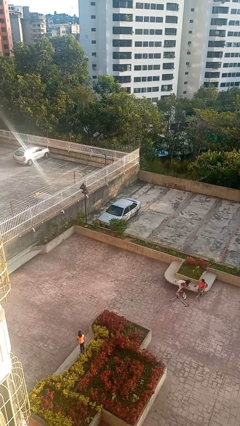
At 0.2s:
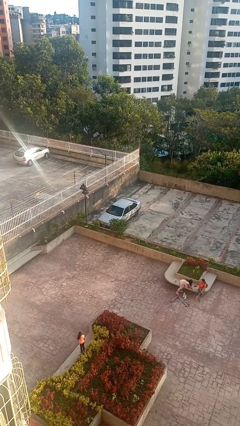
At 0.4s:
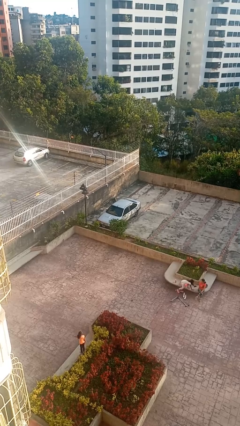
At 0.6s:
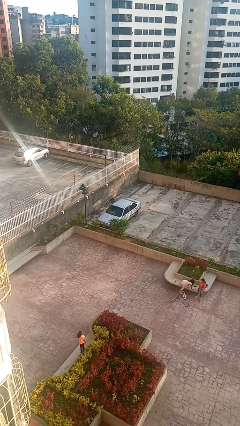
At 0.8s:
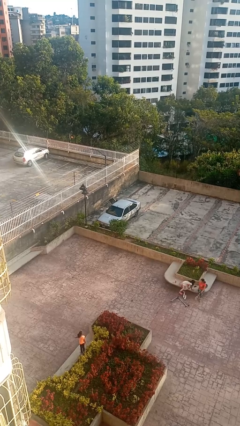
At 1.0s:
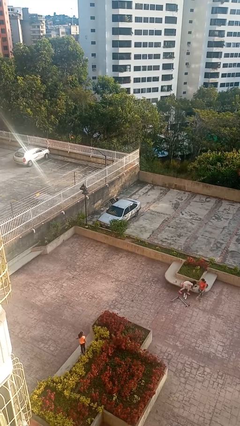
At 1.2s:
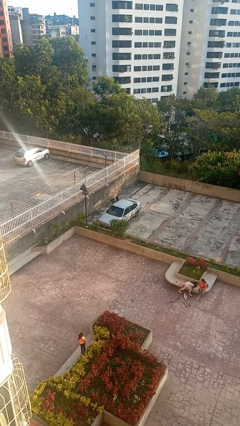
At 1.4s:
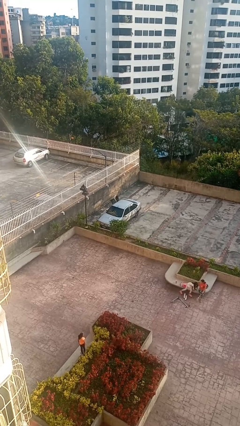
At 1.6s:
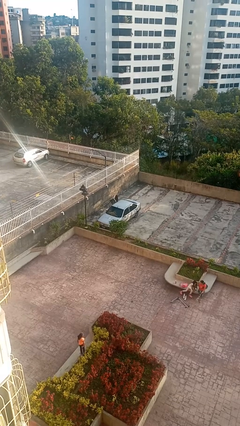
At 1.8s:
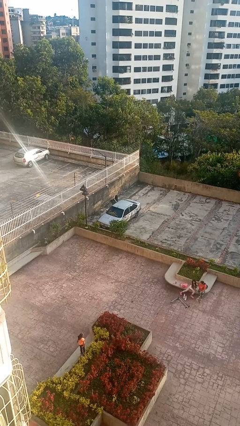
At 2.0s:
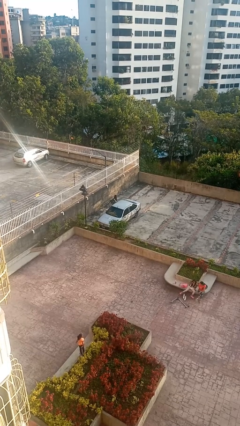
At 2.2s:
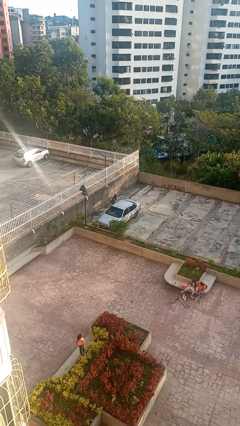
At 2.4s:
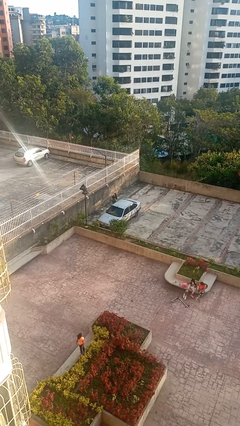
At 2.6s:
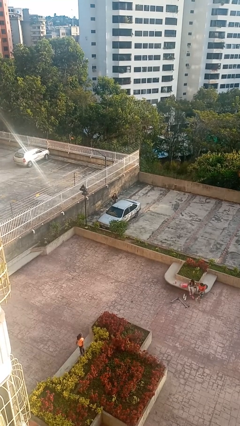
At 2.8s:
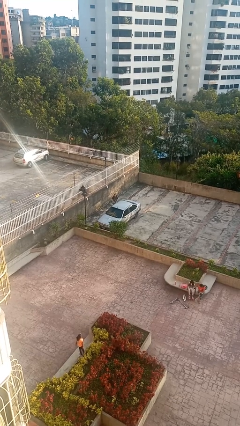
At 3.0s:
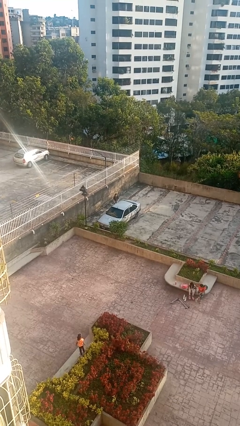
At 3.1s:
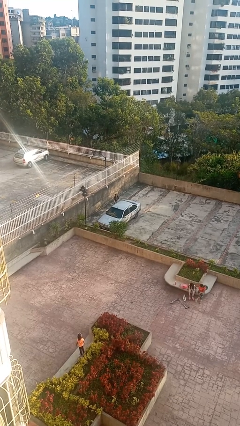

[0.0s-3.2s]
car drops off person

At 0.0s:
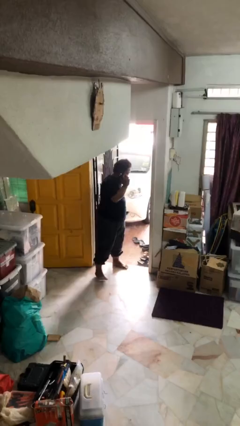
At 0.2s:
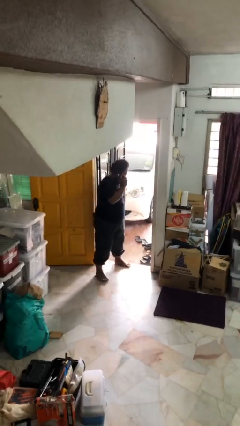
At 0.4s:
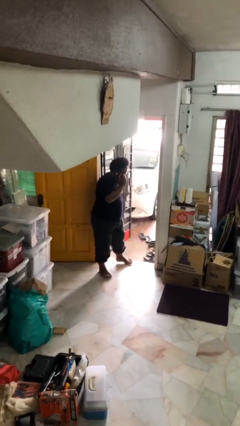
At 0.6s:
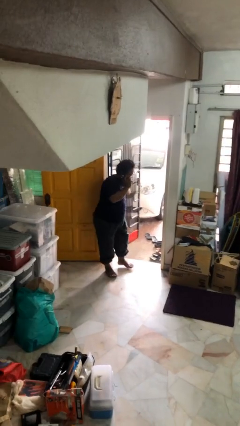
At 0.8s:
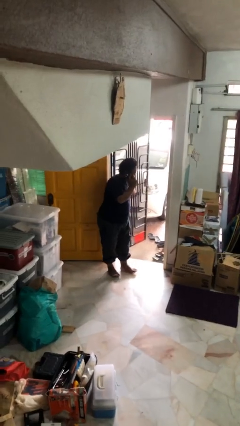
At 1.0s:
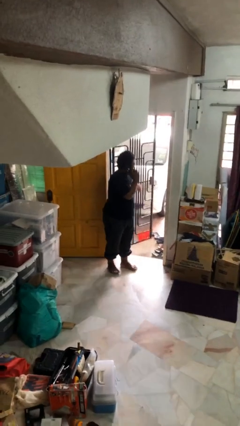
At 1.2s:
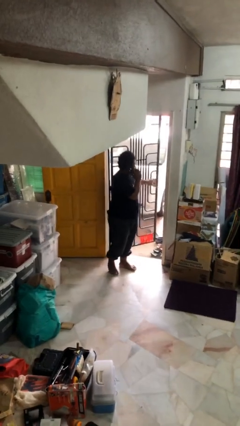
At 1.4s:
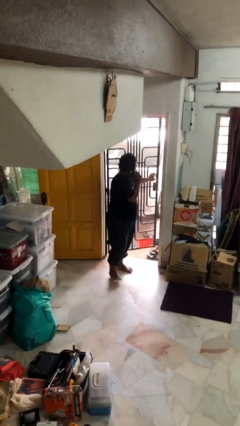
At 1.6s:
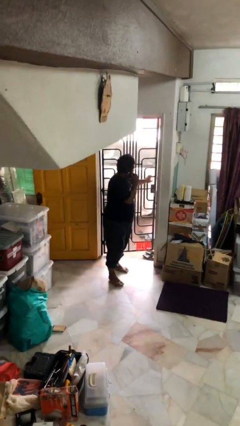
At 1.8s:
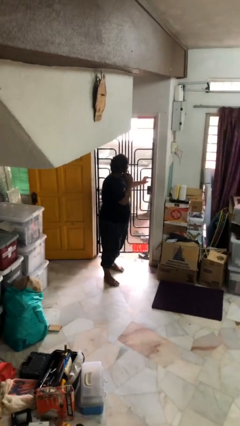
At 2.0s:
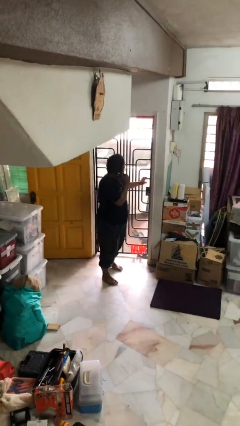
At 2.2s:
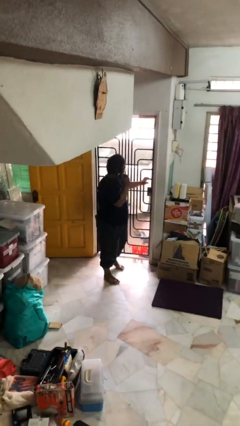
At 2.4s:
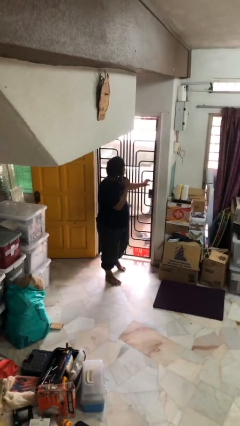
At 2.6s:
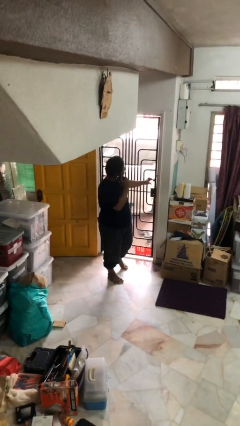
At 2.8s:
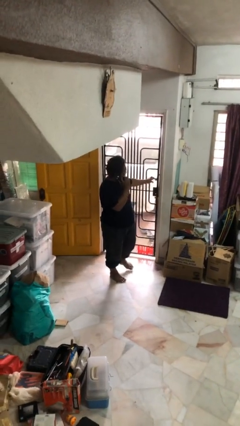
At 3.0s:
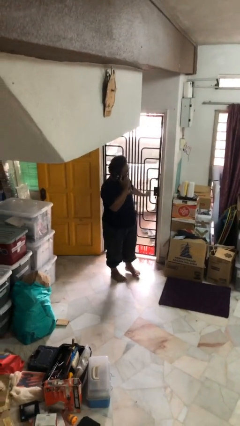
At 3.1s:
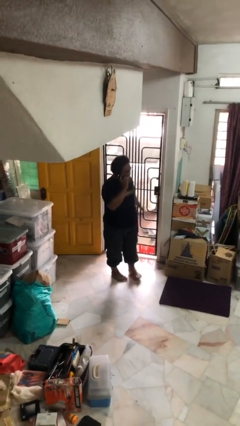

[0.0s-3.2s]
person closes facility door

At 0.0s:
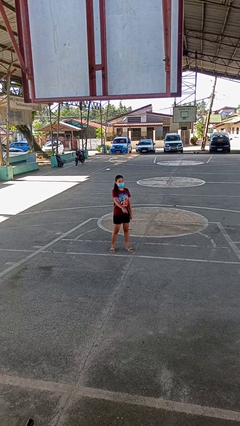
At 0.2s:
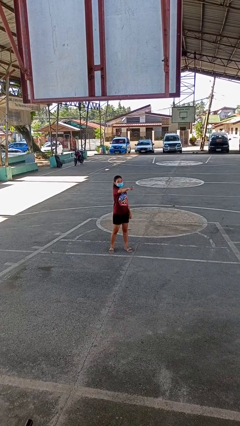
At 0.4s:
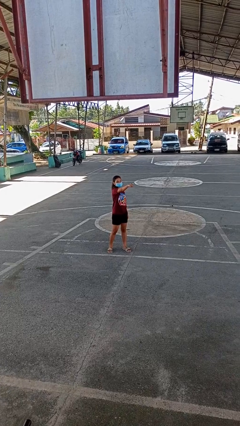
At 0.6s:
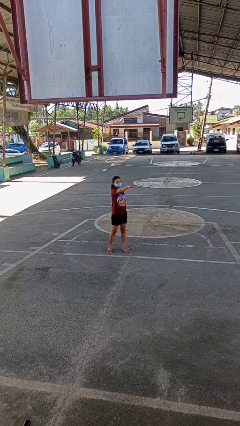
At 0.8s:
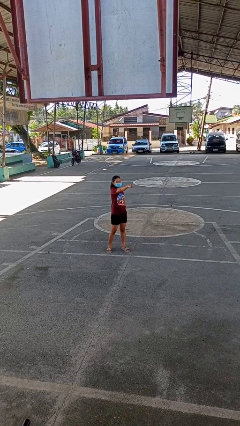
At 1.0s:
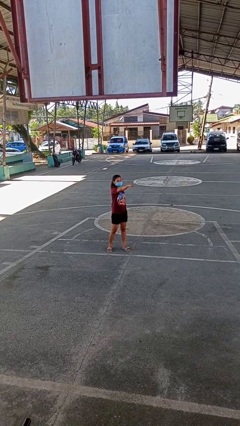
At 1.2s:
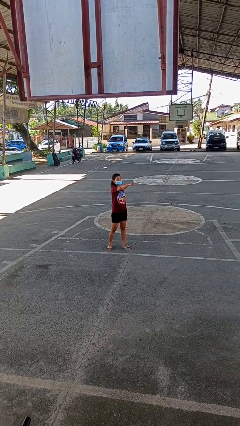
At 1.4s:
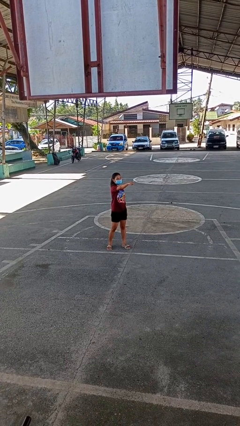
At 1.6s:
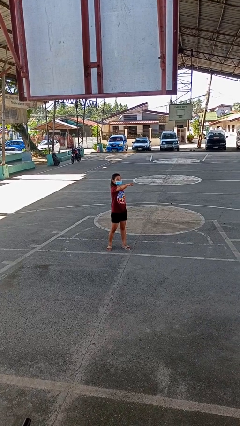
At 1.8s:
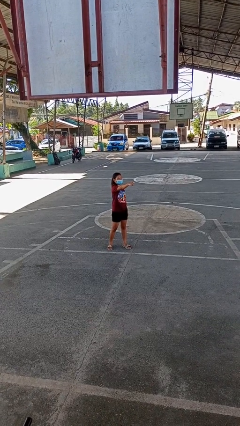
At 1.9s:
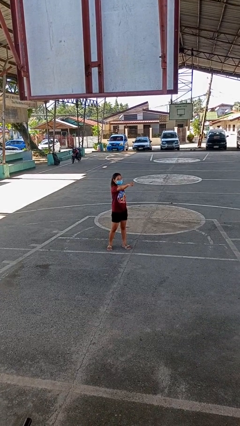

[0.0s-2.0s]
person points at person

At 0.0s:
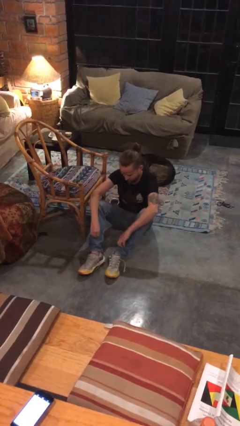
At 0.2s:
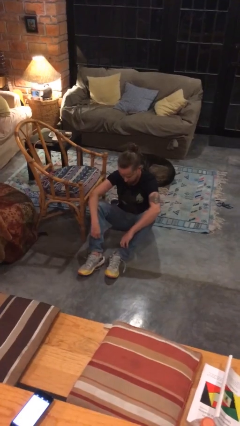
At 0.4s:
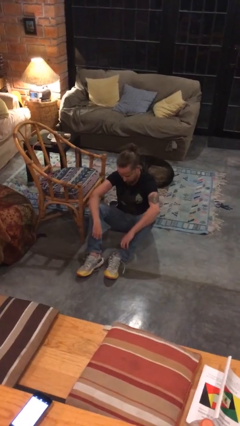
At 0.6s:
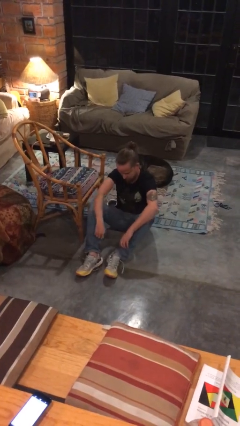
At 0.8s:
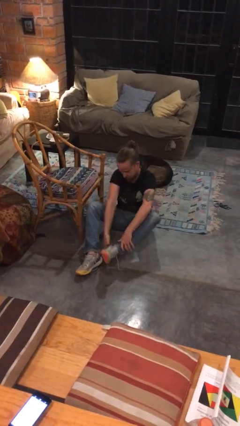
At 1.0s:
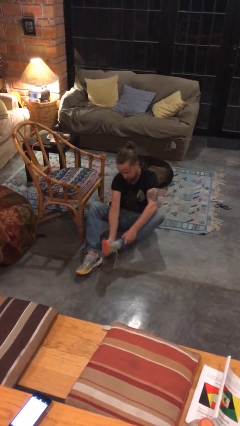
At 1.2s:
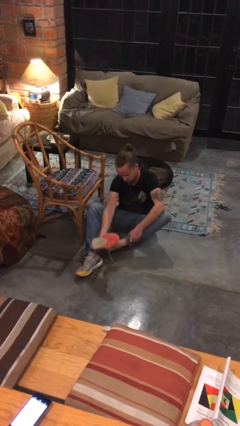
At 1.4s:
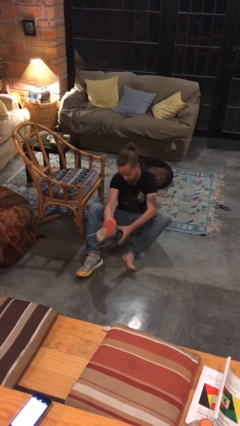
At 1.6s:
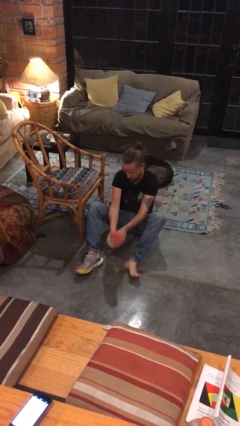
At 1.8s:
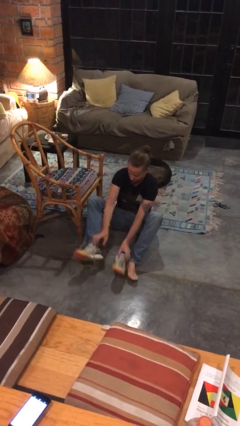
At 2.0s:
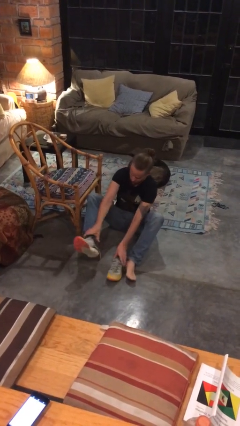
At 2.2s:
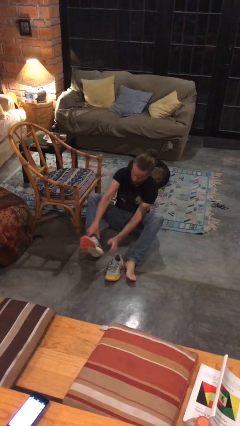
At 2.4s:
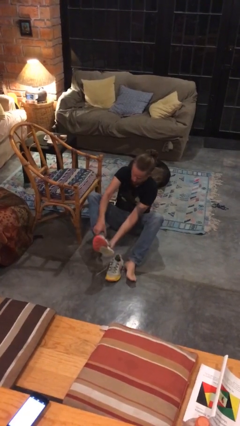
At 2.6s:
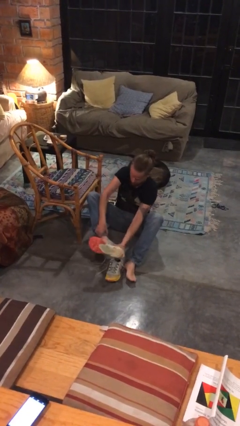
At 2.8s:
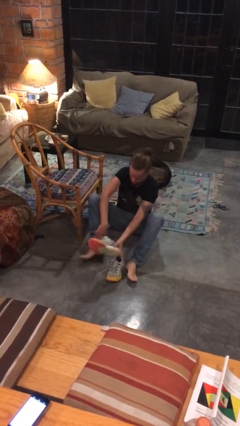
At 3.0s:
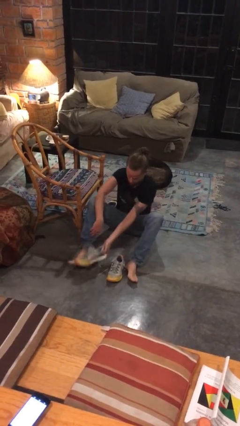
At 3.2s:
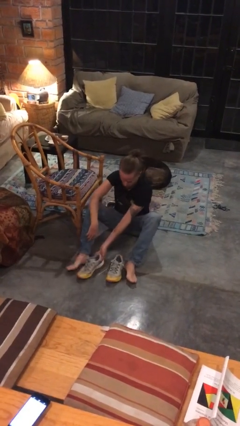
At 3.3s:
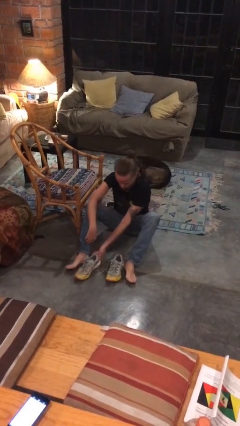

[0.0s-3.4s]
person takes off shoes

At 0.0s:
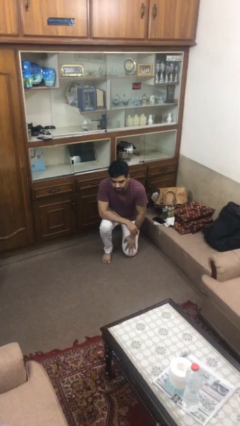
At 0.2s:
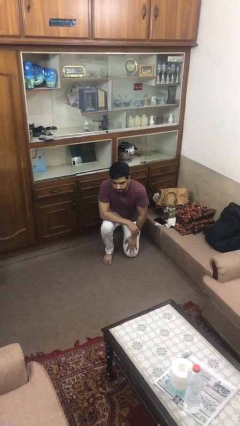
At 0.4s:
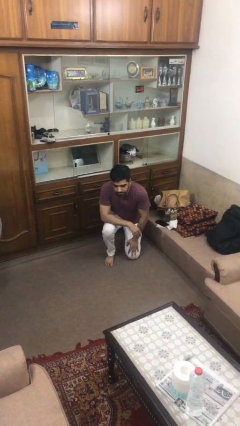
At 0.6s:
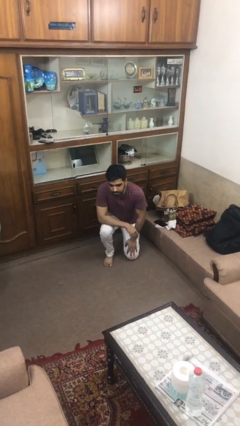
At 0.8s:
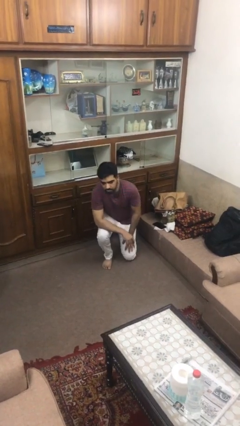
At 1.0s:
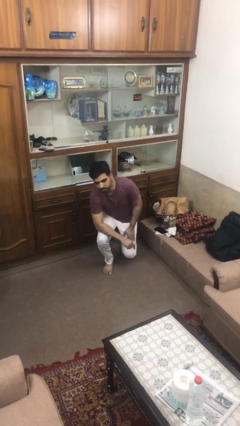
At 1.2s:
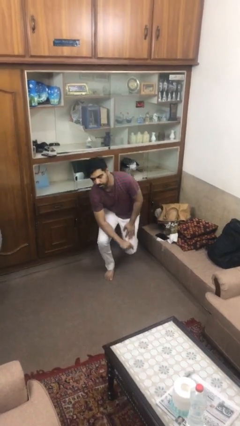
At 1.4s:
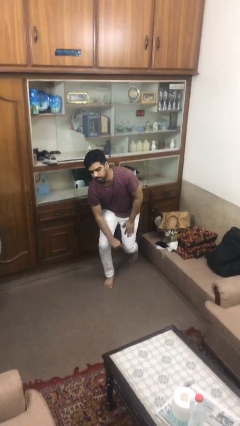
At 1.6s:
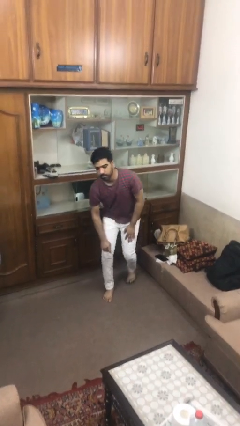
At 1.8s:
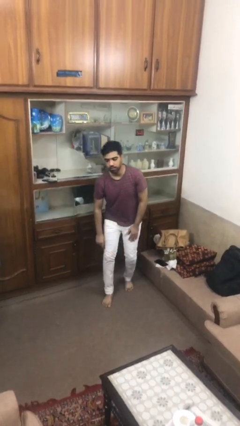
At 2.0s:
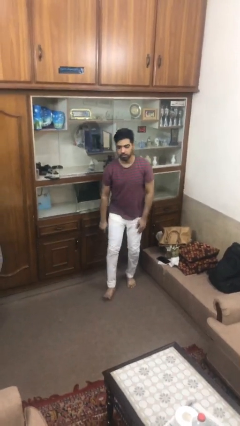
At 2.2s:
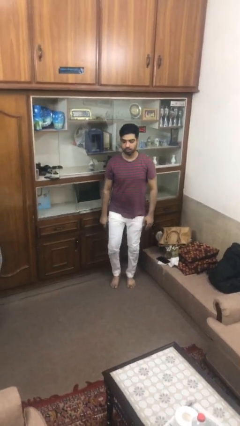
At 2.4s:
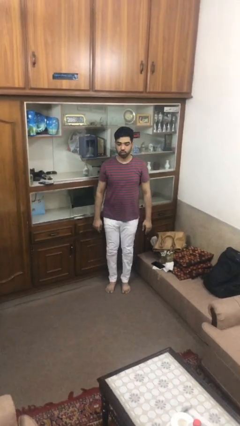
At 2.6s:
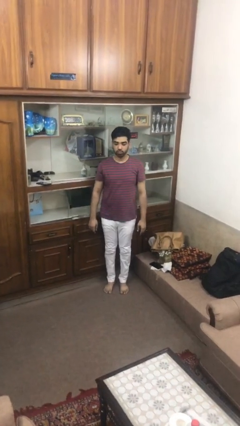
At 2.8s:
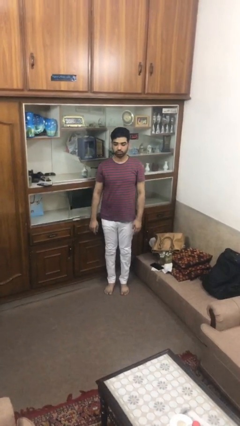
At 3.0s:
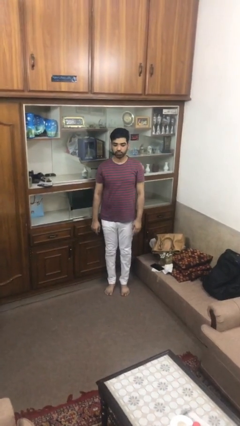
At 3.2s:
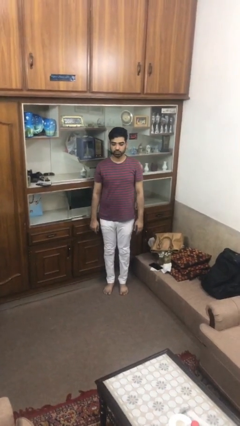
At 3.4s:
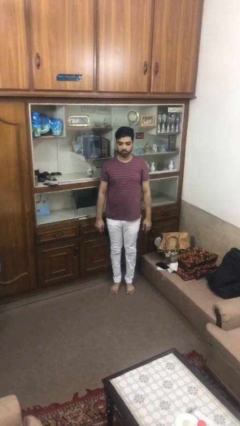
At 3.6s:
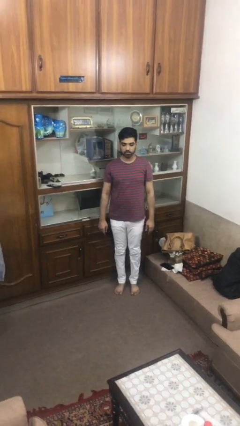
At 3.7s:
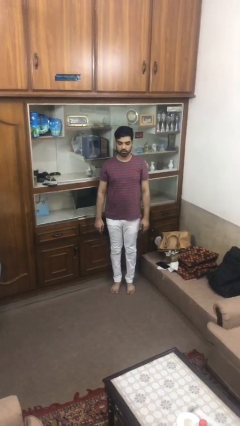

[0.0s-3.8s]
person stands up from floor

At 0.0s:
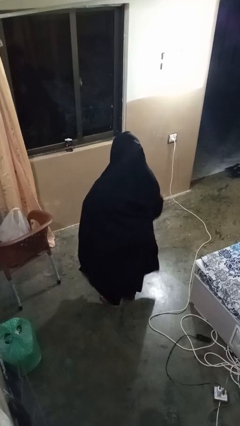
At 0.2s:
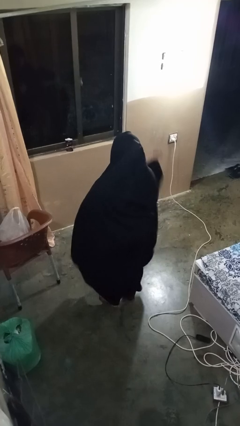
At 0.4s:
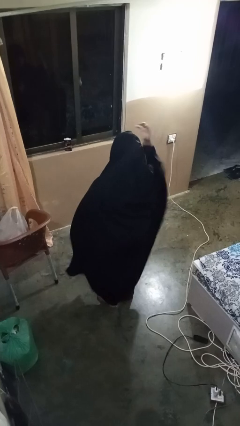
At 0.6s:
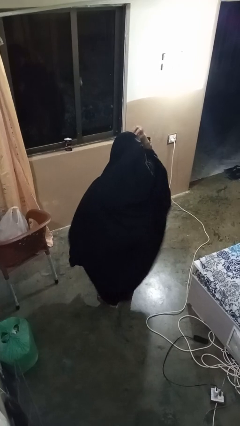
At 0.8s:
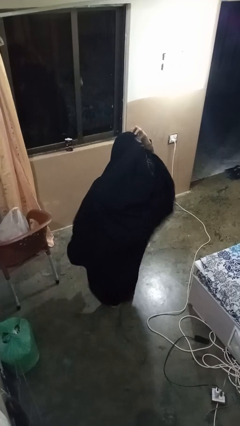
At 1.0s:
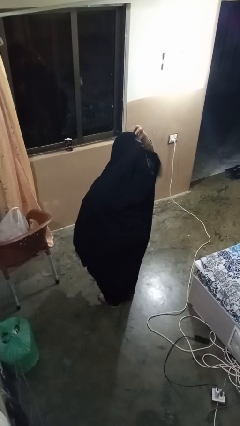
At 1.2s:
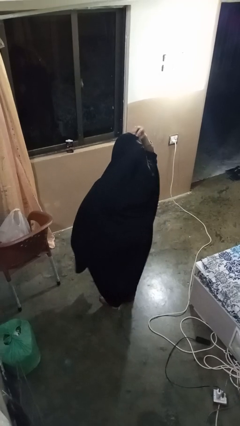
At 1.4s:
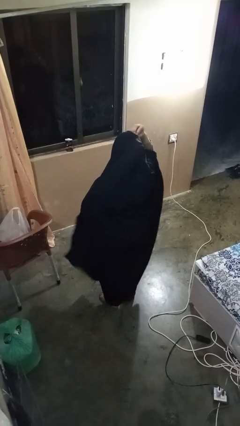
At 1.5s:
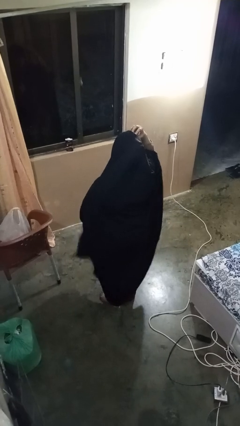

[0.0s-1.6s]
person scratches face

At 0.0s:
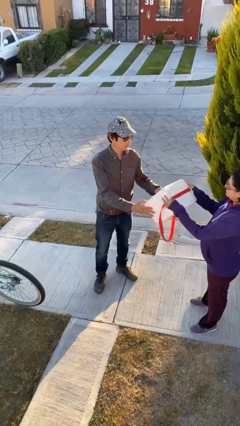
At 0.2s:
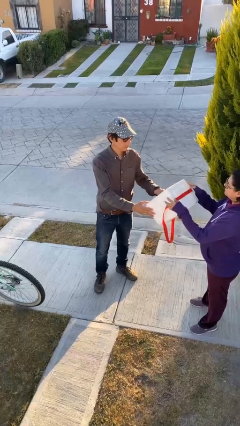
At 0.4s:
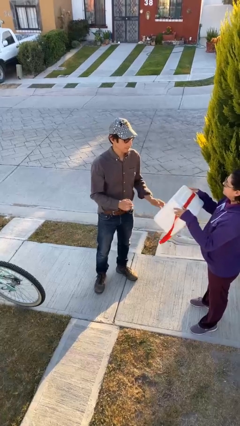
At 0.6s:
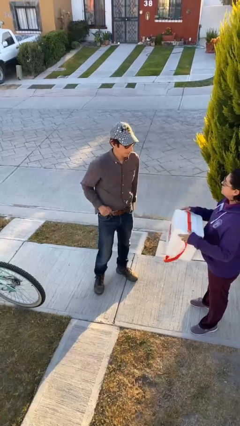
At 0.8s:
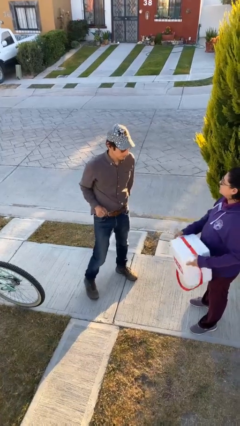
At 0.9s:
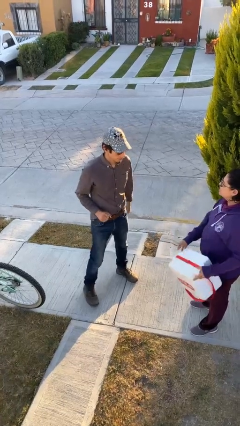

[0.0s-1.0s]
person transfers object to person
